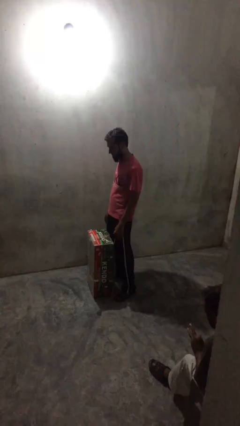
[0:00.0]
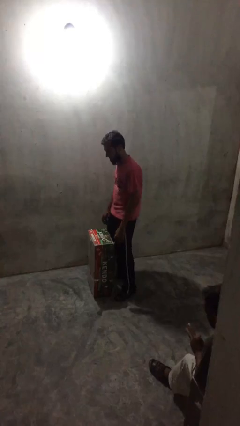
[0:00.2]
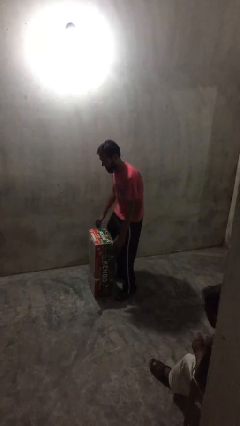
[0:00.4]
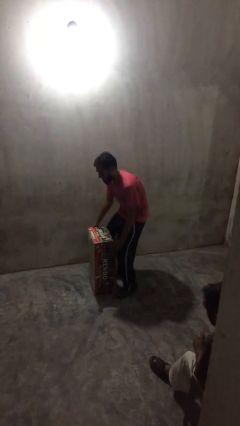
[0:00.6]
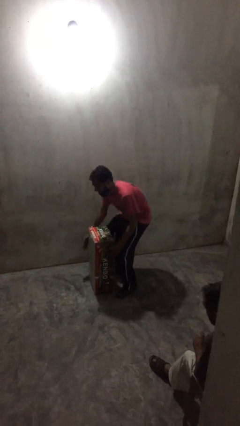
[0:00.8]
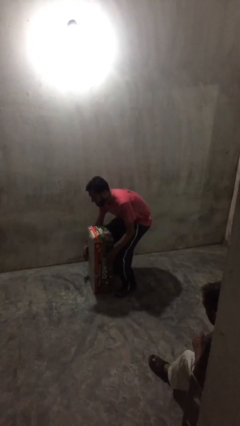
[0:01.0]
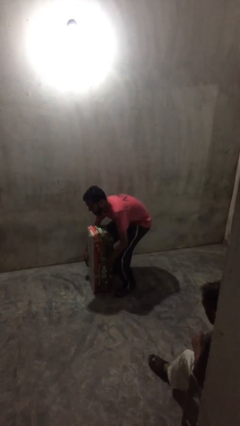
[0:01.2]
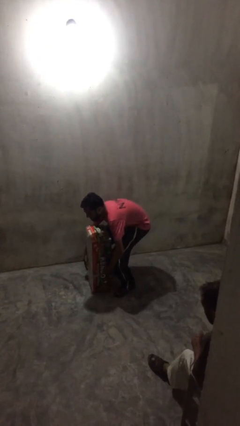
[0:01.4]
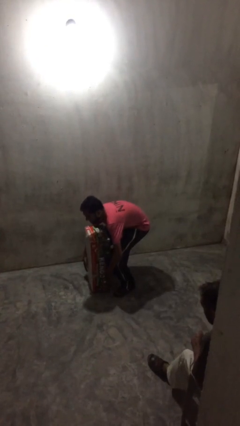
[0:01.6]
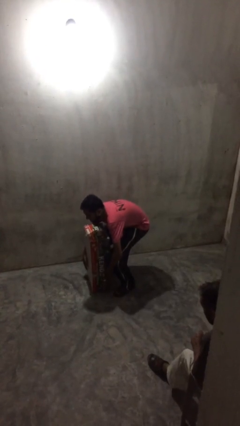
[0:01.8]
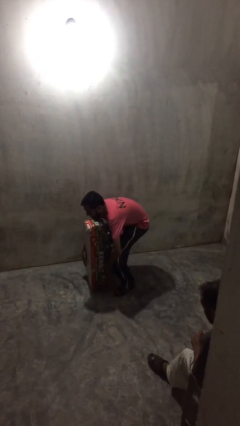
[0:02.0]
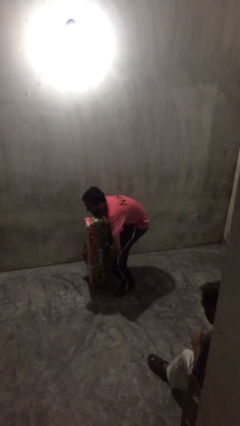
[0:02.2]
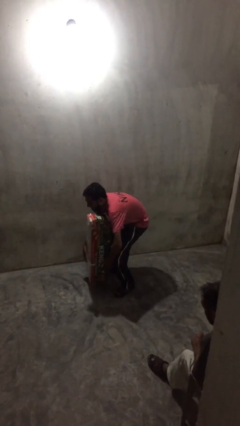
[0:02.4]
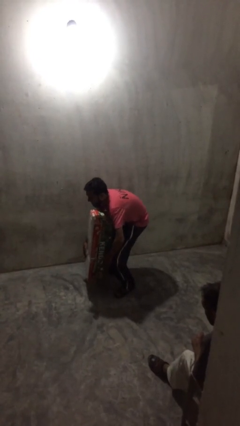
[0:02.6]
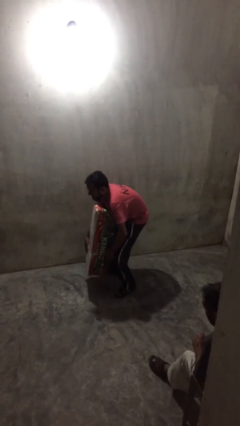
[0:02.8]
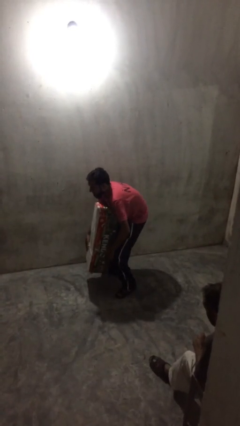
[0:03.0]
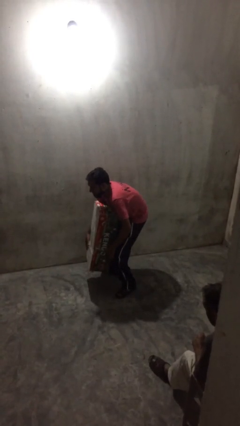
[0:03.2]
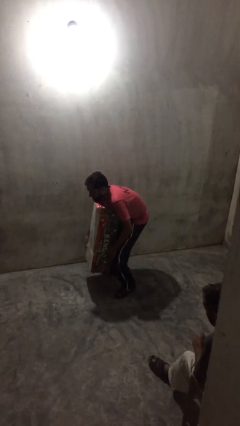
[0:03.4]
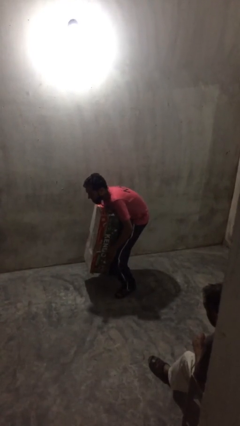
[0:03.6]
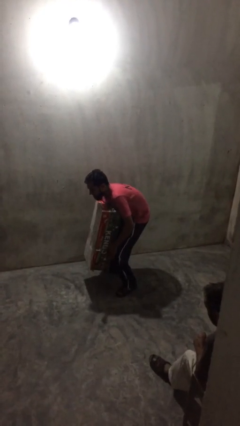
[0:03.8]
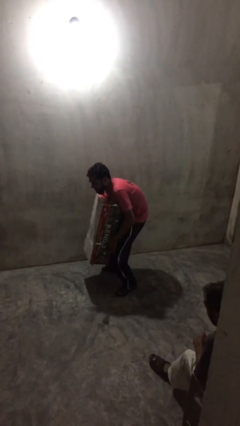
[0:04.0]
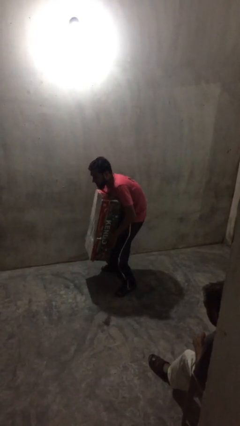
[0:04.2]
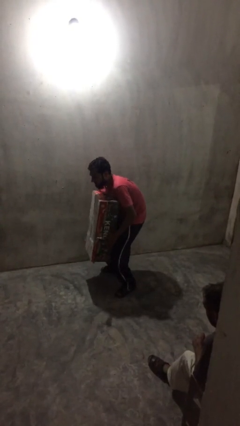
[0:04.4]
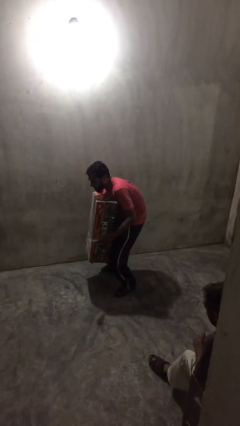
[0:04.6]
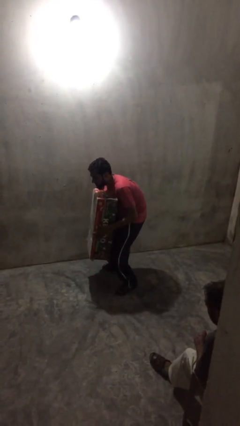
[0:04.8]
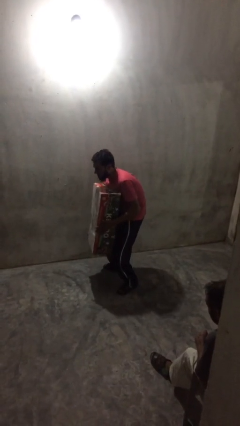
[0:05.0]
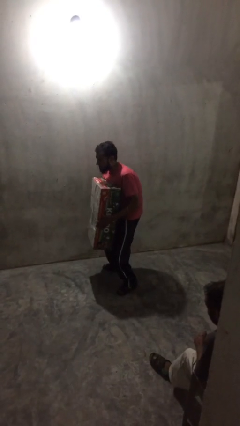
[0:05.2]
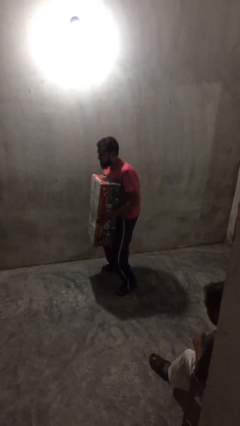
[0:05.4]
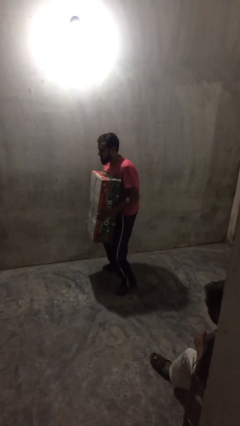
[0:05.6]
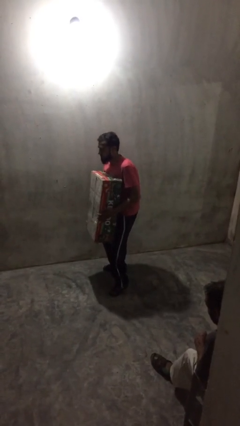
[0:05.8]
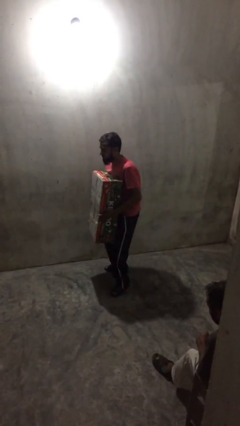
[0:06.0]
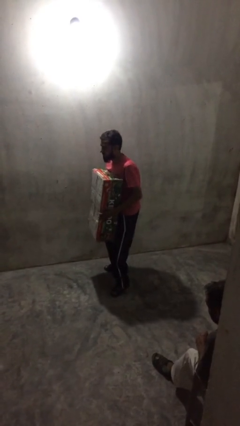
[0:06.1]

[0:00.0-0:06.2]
person picks up object from floor

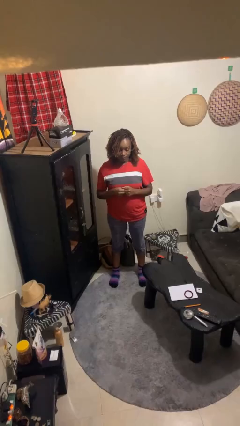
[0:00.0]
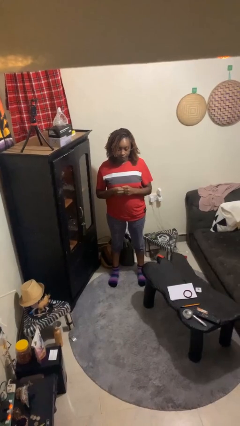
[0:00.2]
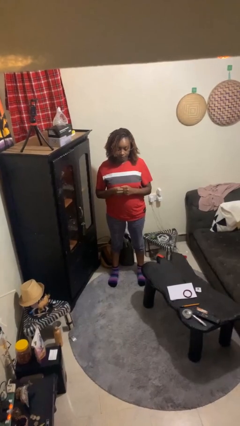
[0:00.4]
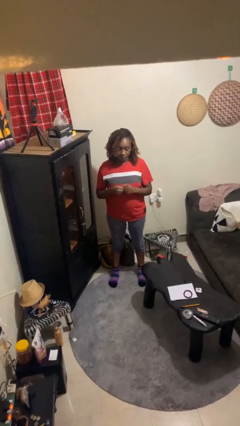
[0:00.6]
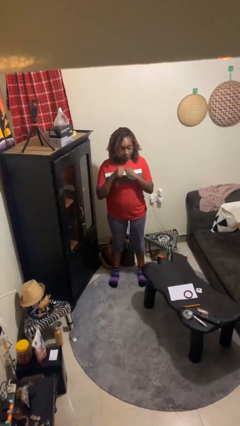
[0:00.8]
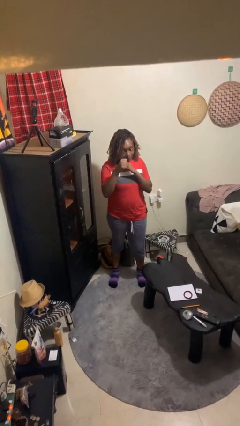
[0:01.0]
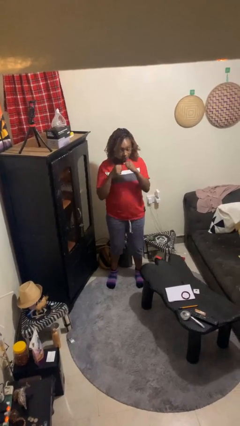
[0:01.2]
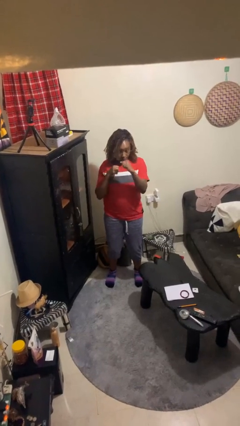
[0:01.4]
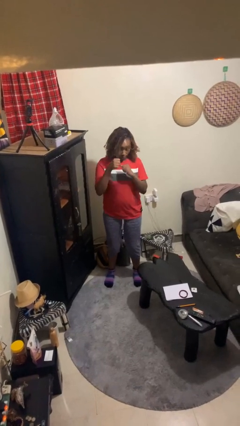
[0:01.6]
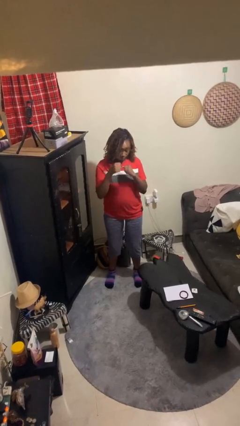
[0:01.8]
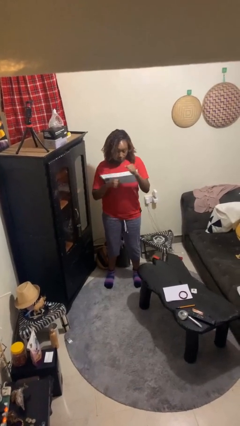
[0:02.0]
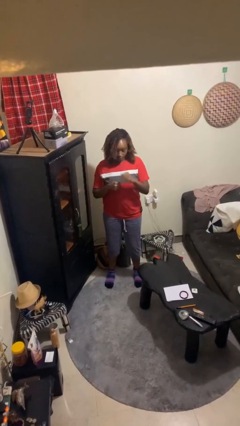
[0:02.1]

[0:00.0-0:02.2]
person punches

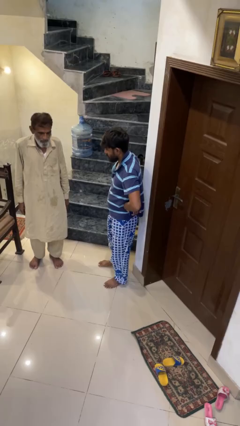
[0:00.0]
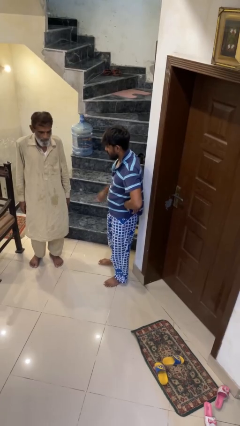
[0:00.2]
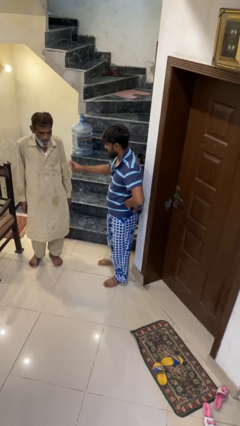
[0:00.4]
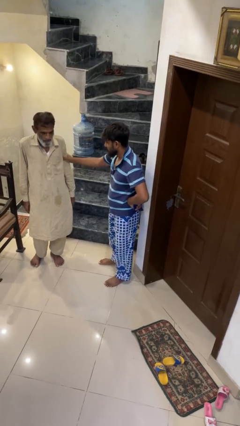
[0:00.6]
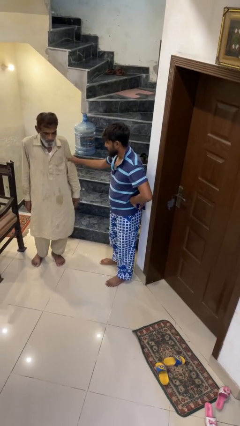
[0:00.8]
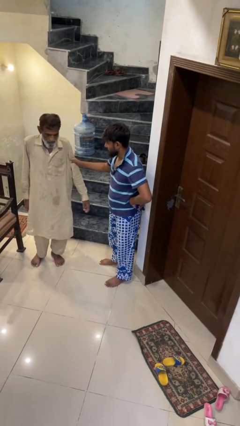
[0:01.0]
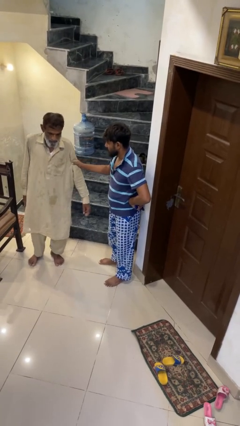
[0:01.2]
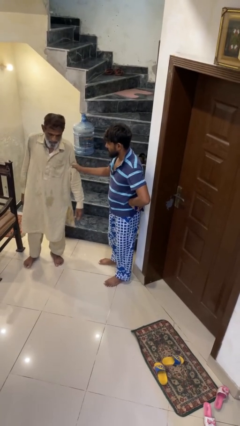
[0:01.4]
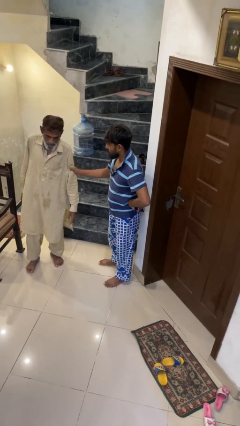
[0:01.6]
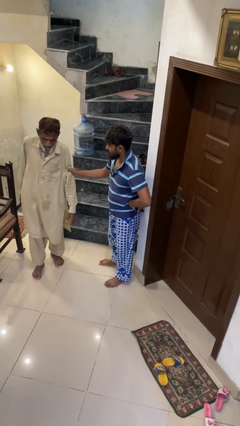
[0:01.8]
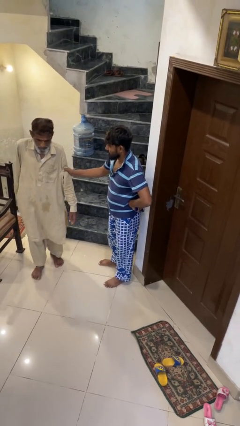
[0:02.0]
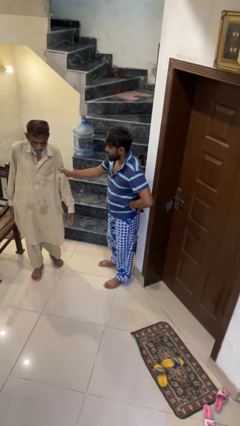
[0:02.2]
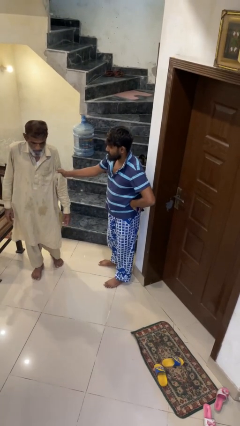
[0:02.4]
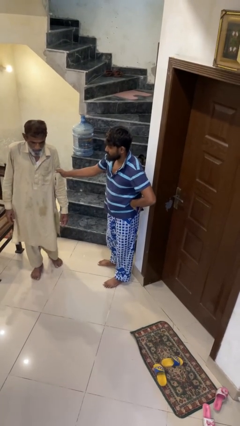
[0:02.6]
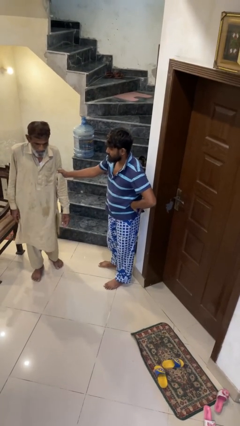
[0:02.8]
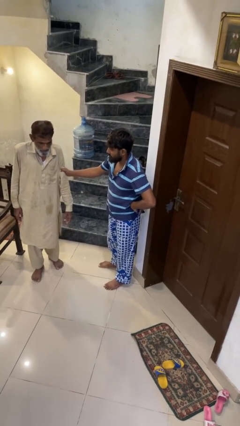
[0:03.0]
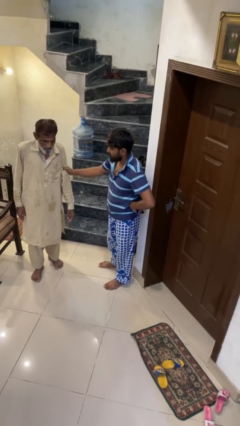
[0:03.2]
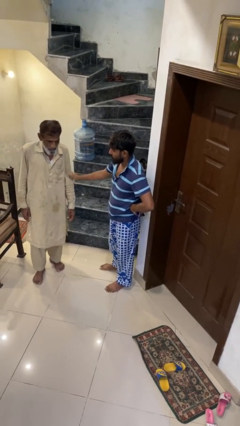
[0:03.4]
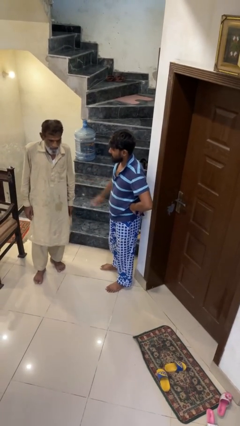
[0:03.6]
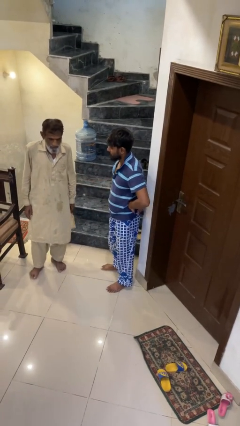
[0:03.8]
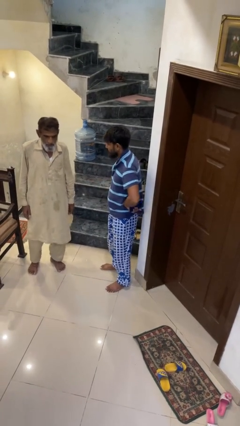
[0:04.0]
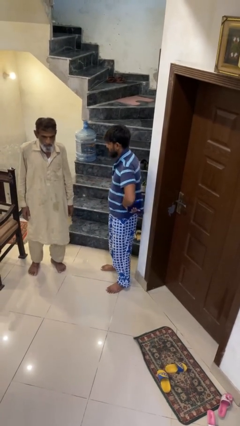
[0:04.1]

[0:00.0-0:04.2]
person grabs person by bicep

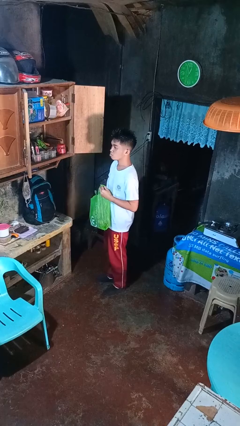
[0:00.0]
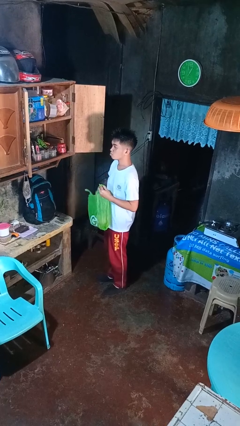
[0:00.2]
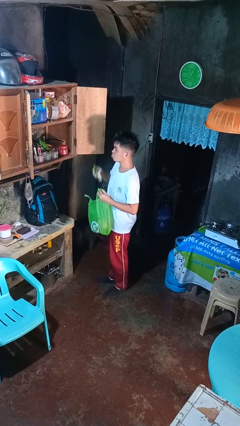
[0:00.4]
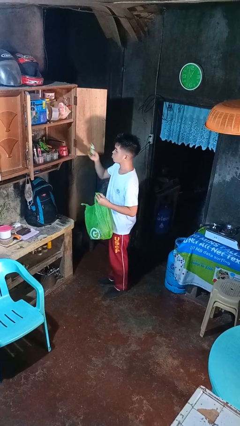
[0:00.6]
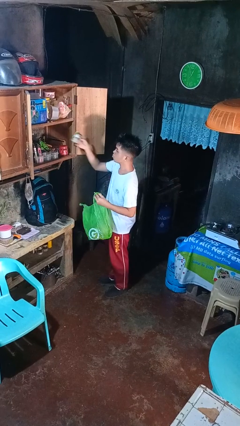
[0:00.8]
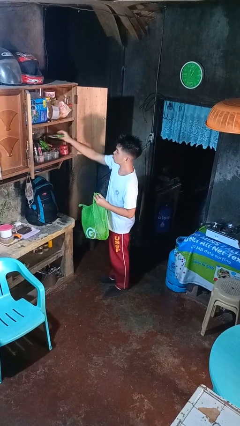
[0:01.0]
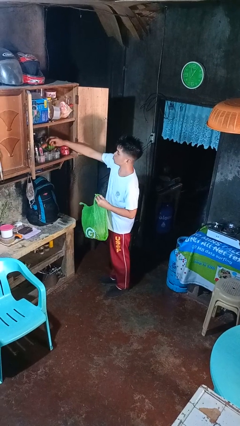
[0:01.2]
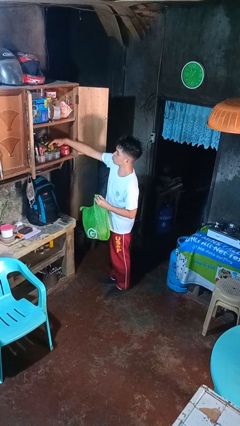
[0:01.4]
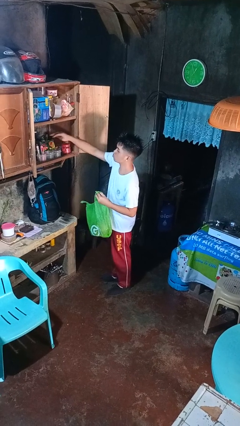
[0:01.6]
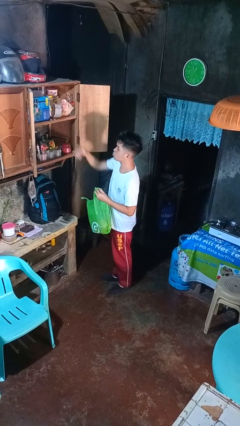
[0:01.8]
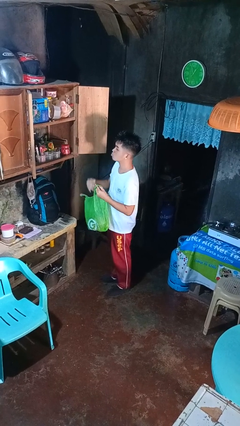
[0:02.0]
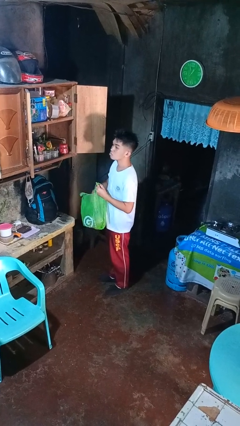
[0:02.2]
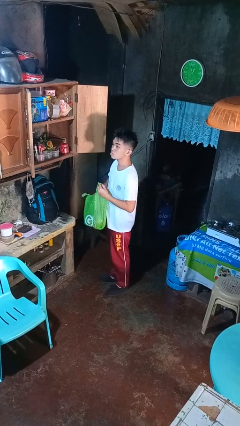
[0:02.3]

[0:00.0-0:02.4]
person loads groceries into cabinet

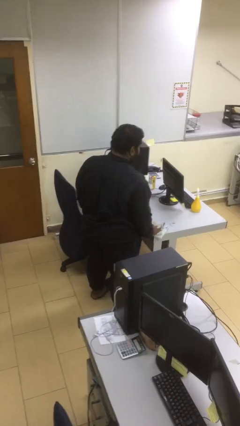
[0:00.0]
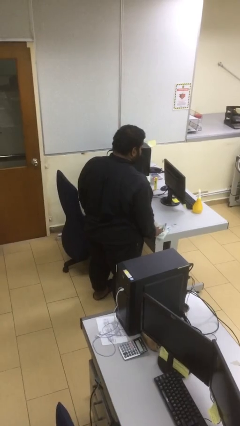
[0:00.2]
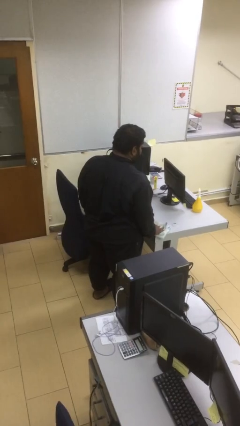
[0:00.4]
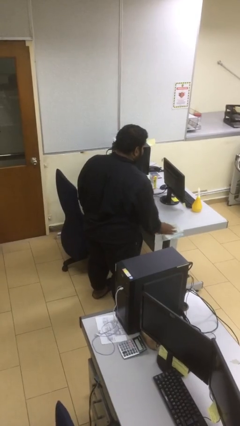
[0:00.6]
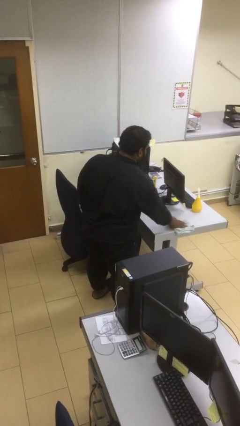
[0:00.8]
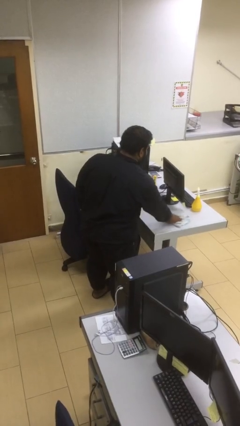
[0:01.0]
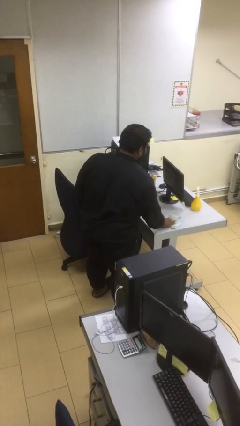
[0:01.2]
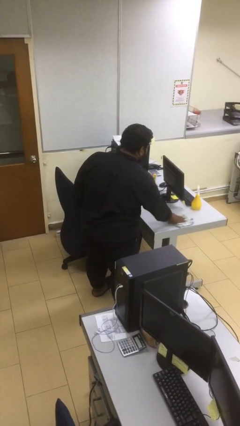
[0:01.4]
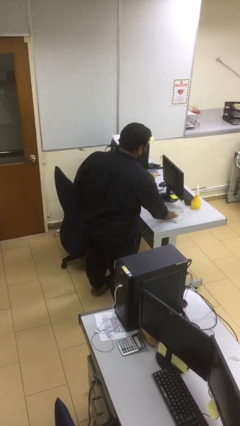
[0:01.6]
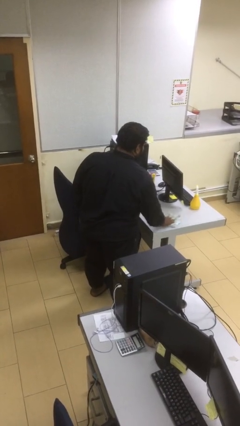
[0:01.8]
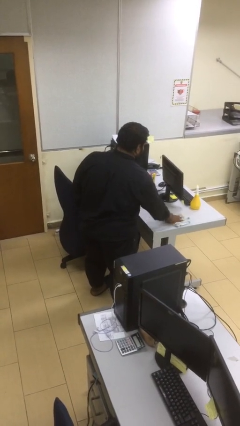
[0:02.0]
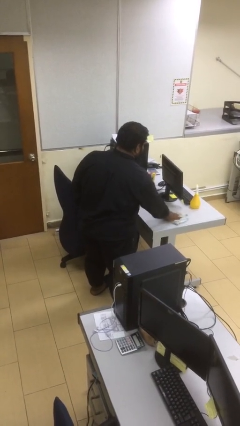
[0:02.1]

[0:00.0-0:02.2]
person cleans table with rag

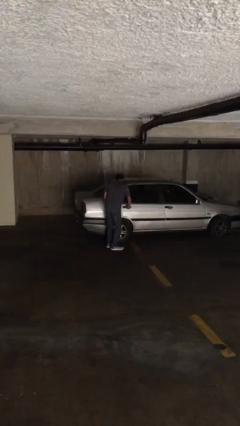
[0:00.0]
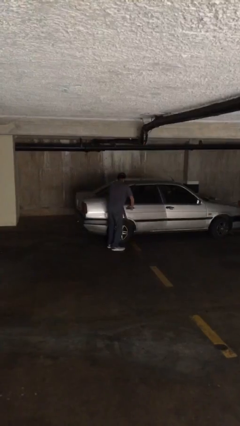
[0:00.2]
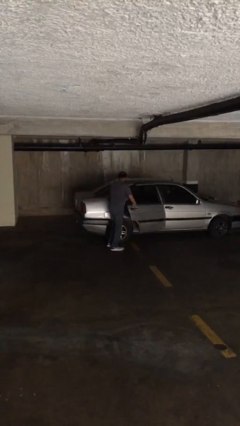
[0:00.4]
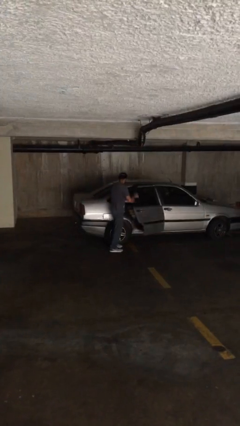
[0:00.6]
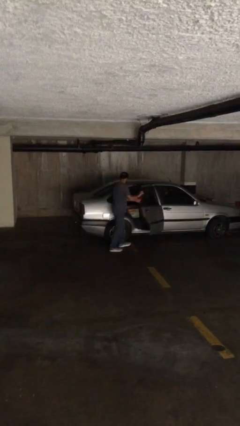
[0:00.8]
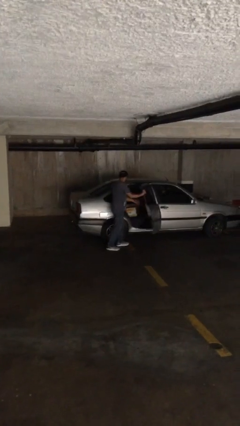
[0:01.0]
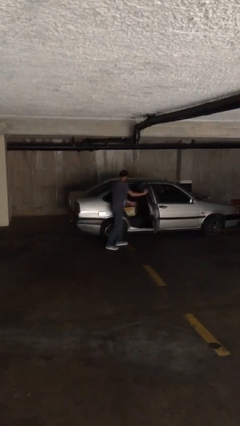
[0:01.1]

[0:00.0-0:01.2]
person opens car door
